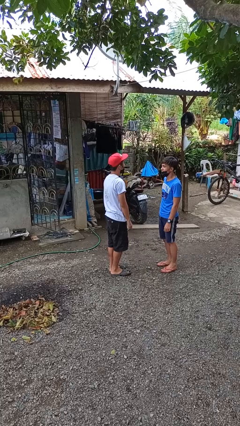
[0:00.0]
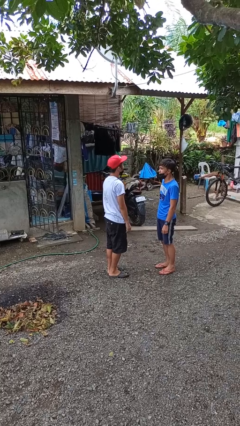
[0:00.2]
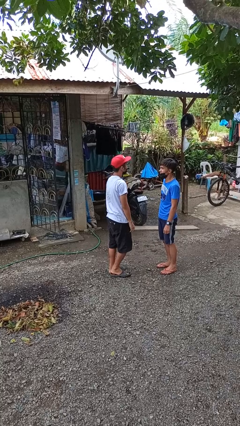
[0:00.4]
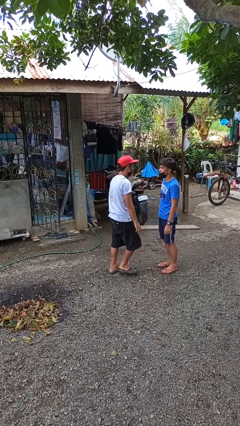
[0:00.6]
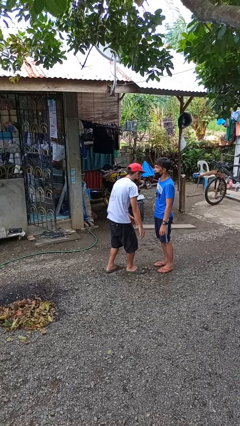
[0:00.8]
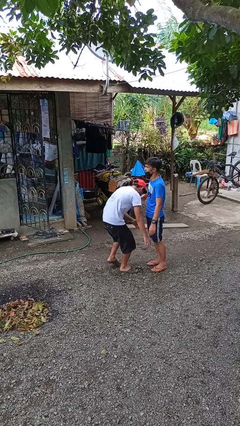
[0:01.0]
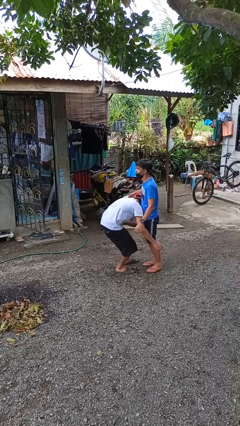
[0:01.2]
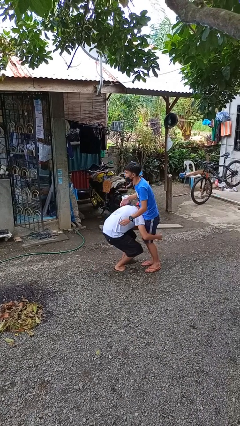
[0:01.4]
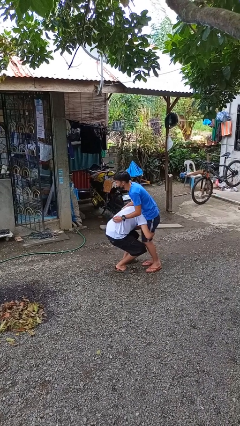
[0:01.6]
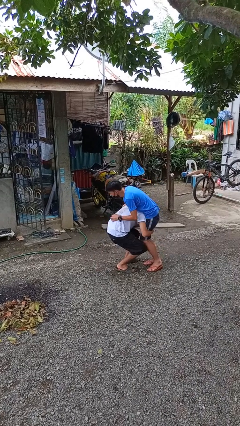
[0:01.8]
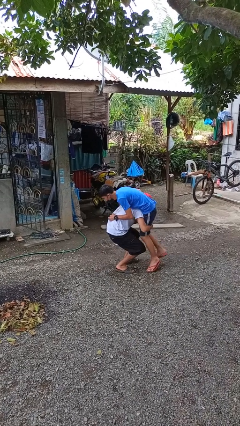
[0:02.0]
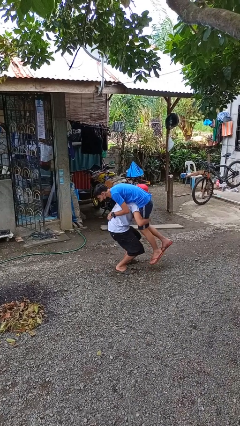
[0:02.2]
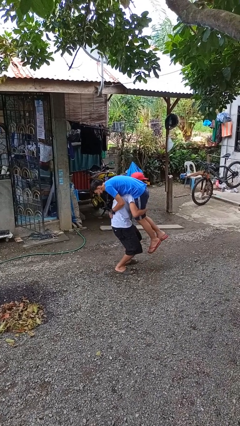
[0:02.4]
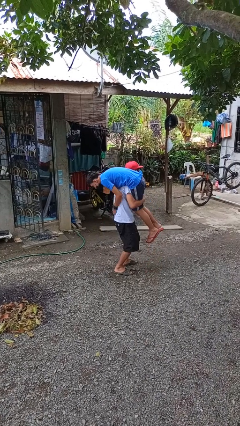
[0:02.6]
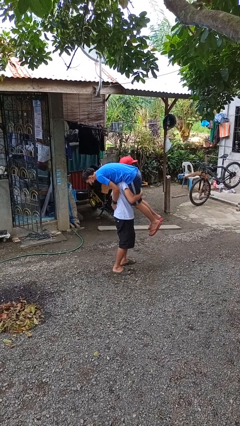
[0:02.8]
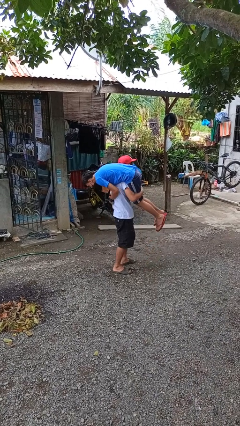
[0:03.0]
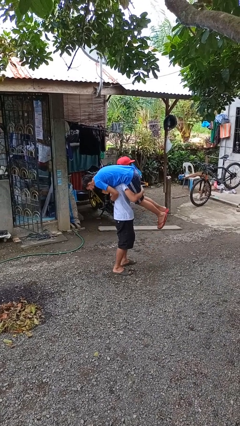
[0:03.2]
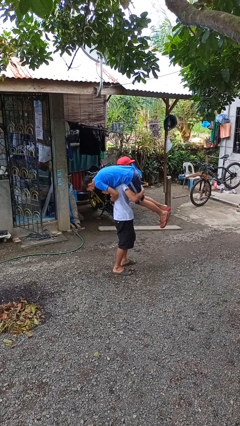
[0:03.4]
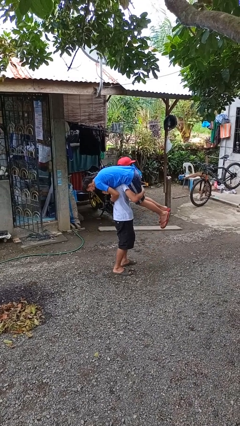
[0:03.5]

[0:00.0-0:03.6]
person carries person over shoulder

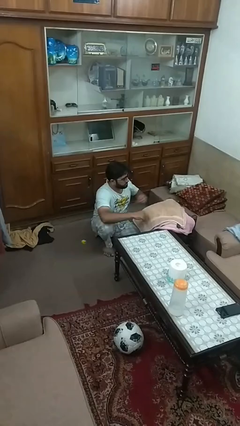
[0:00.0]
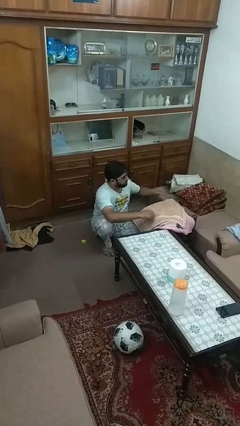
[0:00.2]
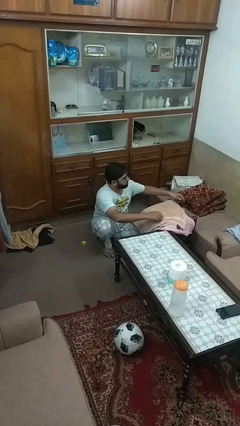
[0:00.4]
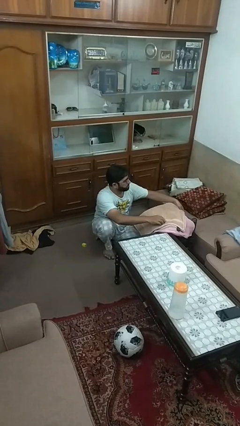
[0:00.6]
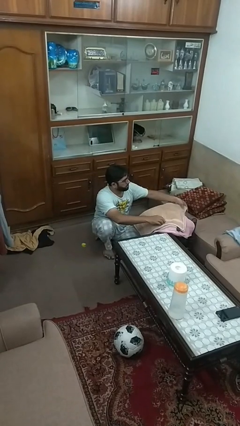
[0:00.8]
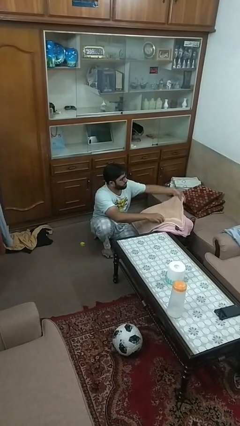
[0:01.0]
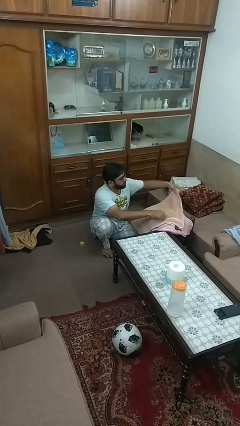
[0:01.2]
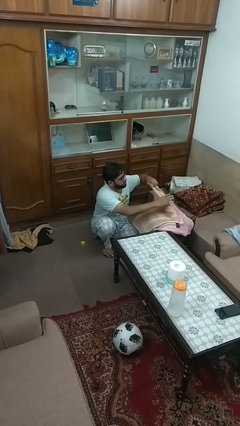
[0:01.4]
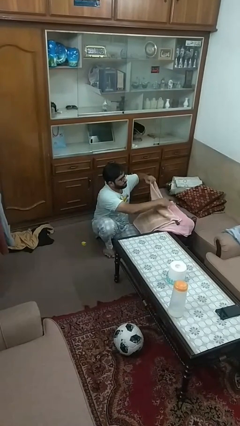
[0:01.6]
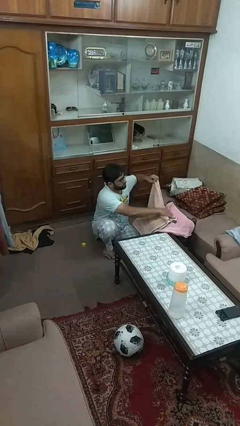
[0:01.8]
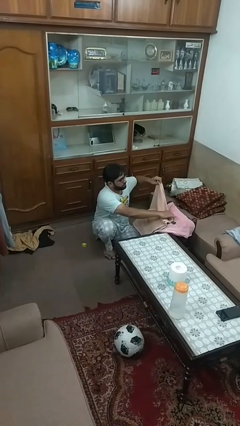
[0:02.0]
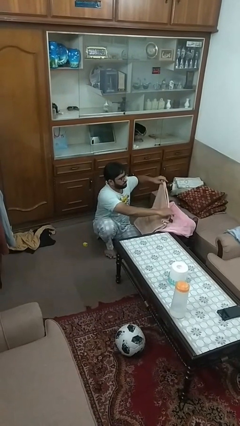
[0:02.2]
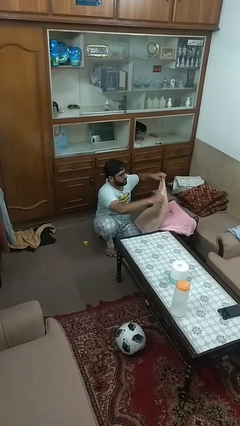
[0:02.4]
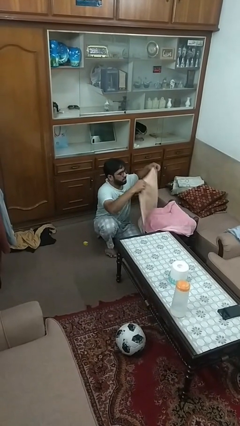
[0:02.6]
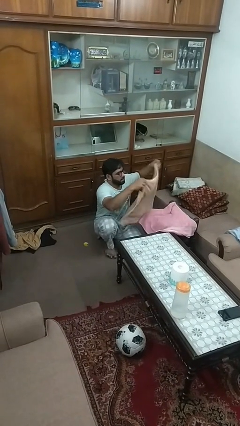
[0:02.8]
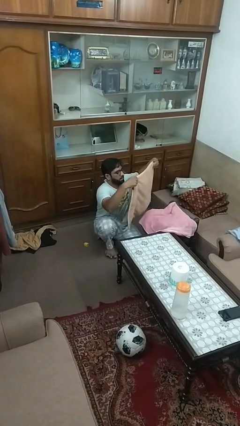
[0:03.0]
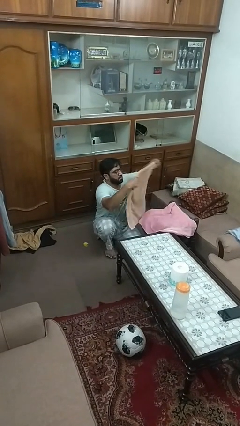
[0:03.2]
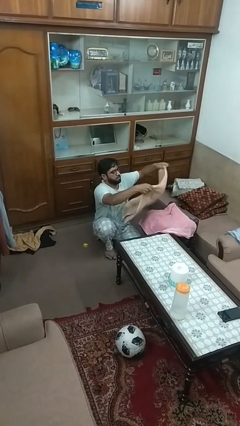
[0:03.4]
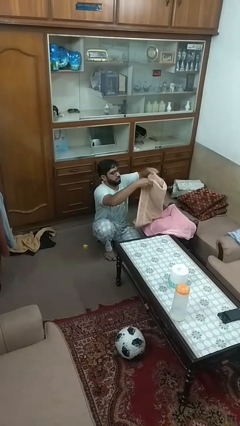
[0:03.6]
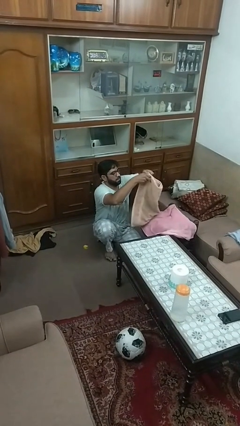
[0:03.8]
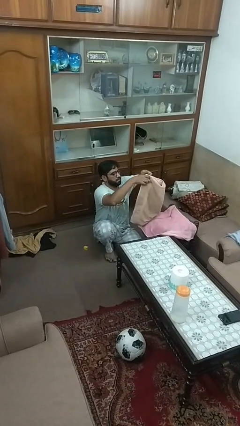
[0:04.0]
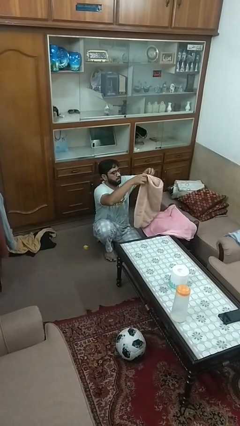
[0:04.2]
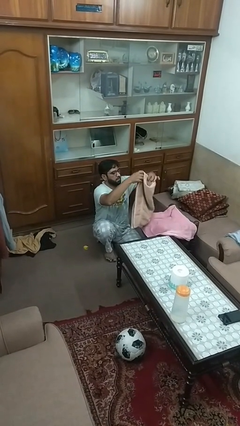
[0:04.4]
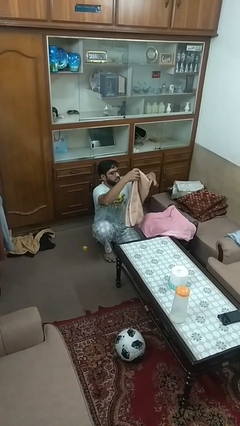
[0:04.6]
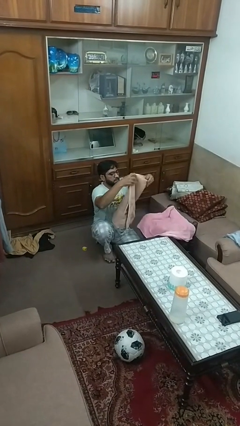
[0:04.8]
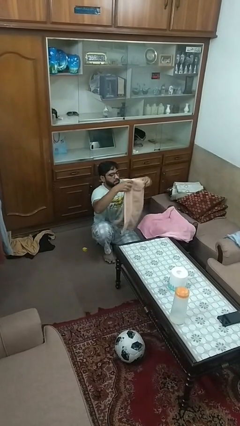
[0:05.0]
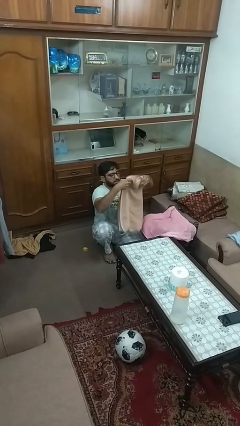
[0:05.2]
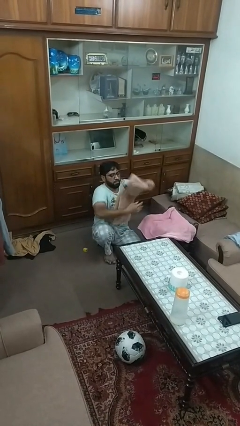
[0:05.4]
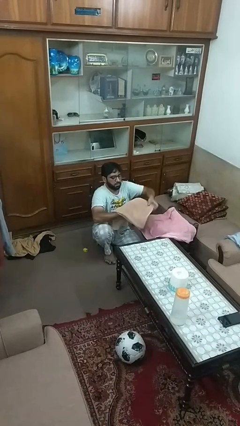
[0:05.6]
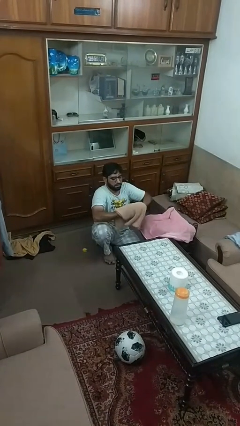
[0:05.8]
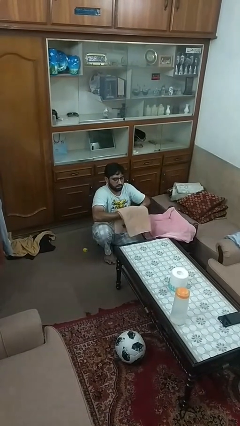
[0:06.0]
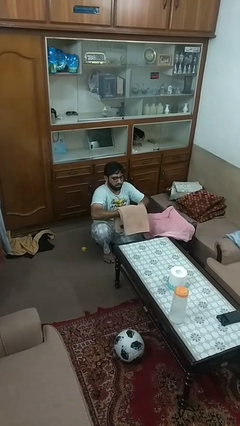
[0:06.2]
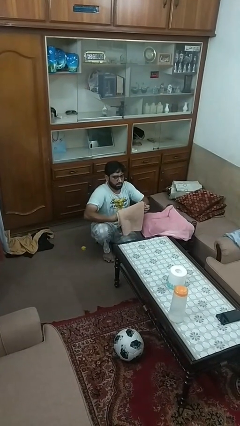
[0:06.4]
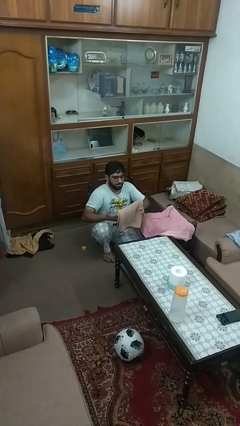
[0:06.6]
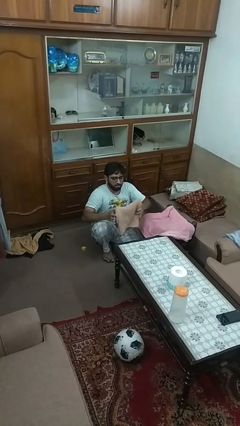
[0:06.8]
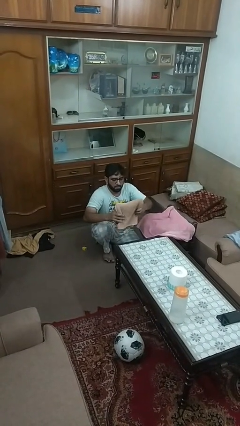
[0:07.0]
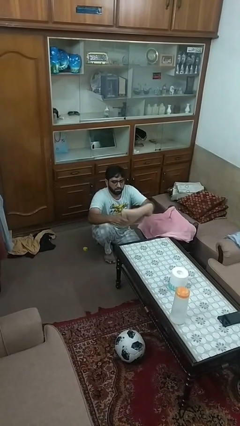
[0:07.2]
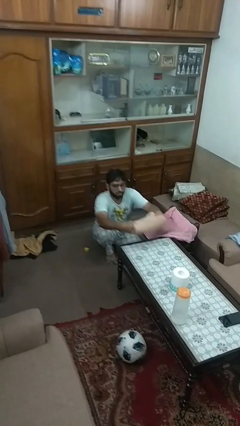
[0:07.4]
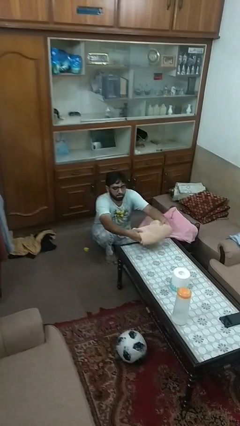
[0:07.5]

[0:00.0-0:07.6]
person folds towel

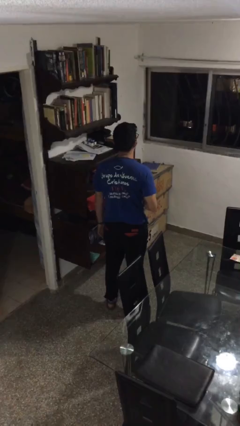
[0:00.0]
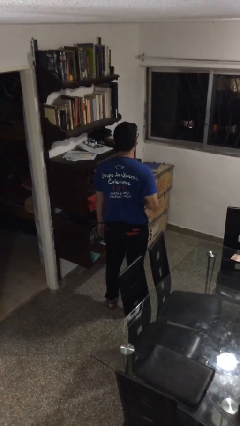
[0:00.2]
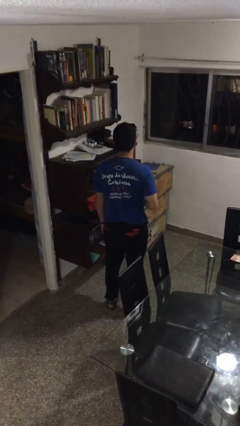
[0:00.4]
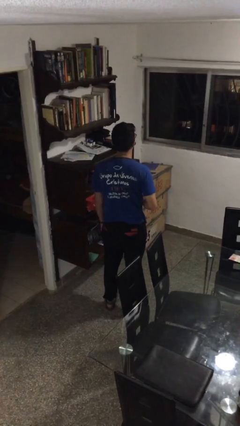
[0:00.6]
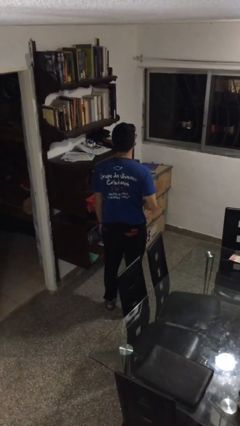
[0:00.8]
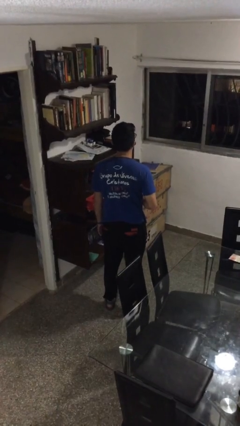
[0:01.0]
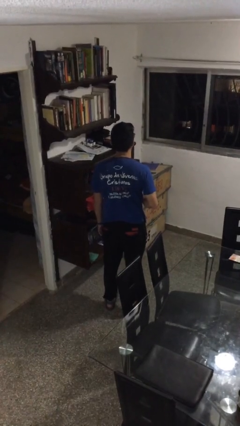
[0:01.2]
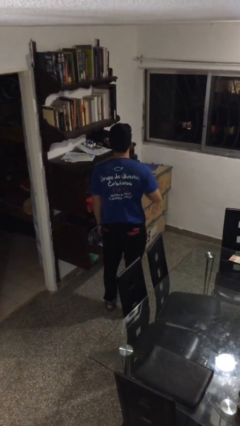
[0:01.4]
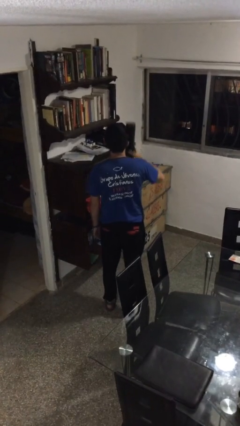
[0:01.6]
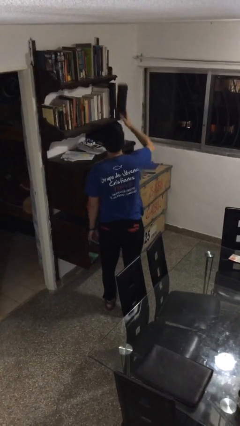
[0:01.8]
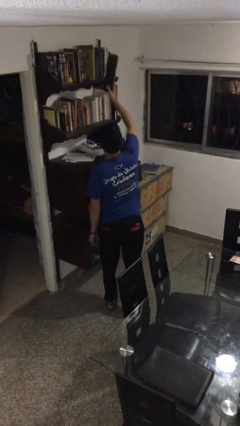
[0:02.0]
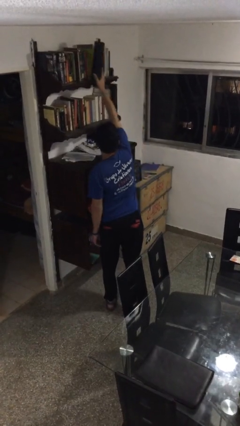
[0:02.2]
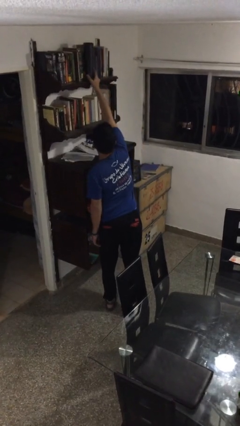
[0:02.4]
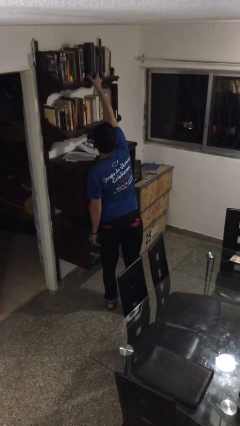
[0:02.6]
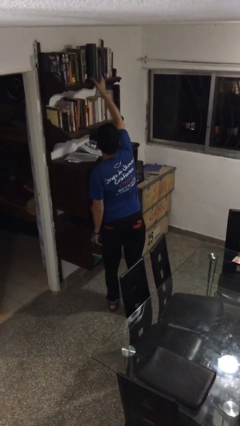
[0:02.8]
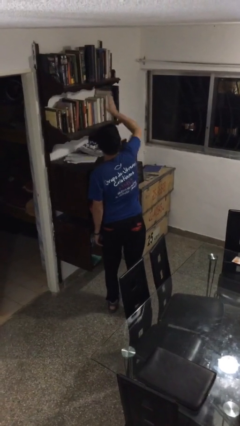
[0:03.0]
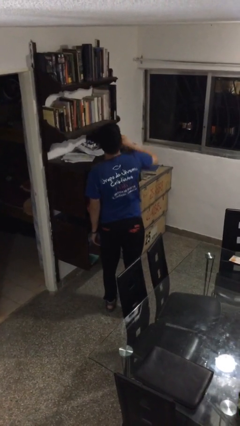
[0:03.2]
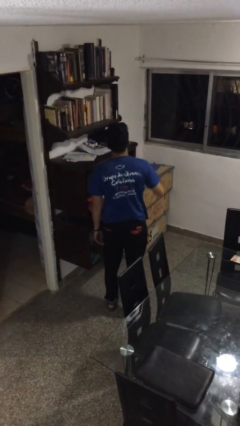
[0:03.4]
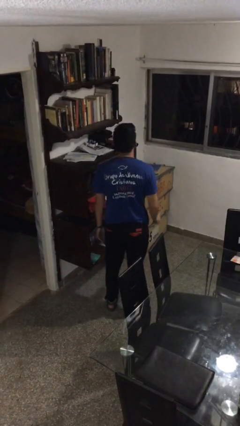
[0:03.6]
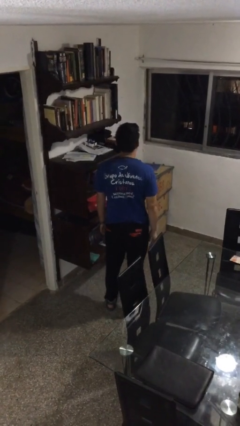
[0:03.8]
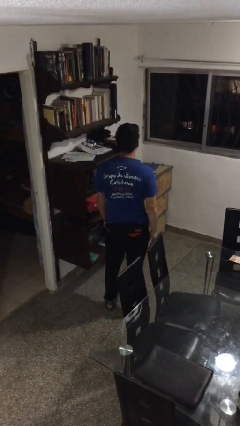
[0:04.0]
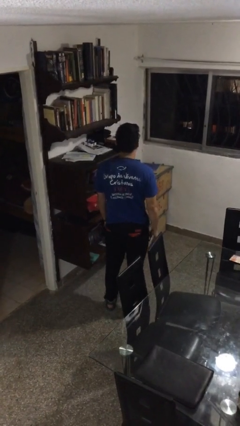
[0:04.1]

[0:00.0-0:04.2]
person puts down object on shelf

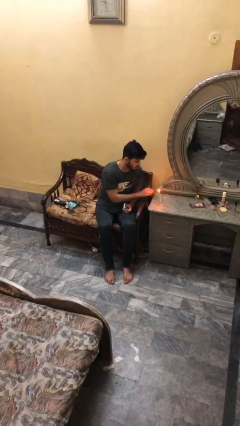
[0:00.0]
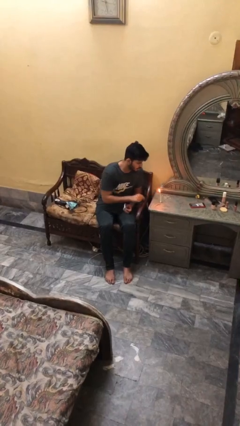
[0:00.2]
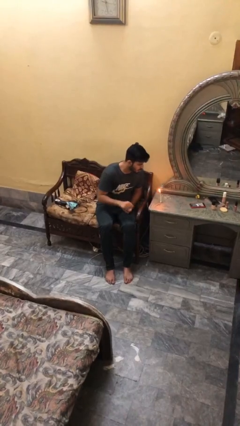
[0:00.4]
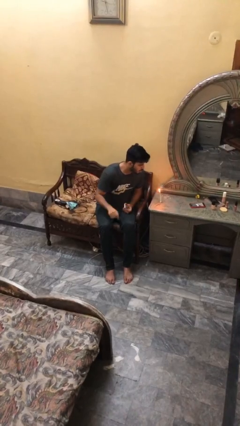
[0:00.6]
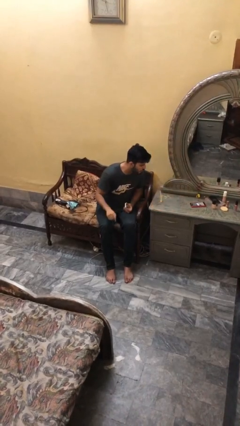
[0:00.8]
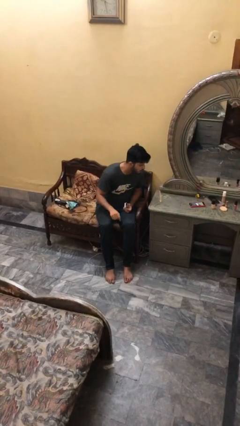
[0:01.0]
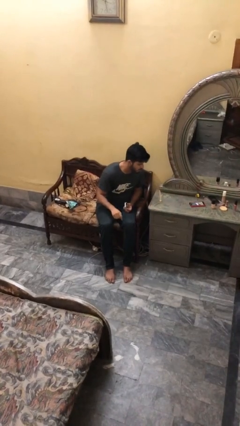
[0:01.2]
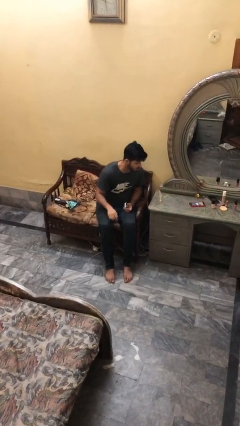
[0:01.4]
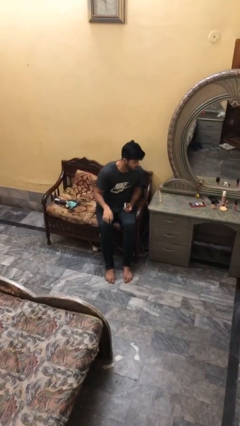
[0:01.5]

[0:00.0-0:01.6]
person extinguishes candle

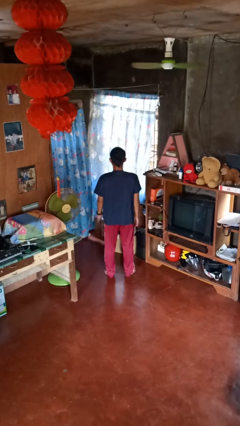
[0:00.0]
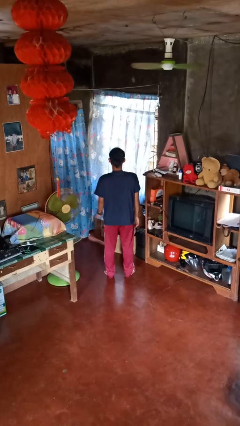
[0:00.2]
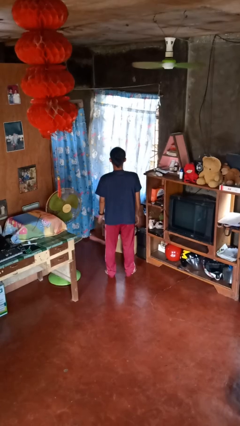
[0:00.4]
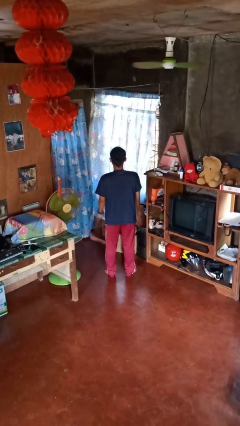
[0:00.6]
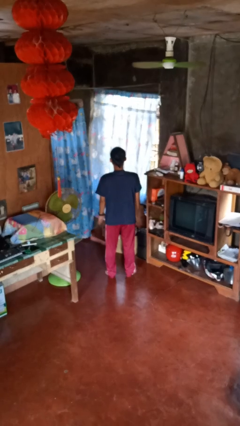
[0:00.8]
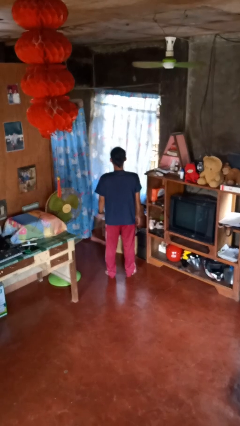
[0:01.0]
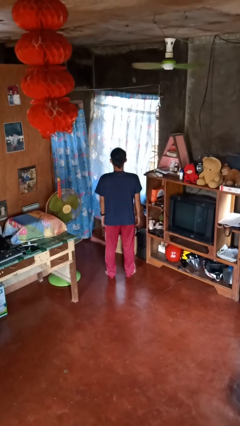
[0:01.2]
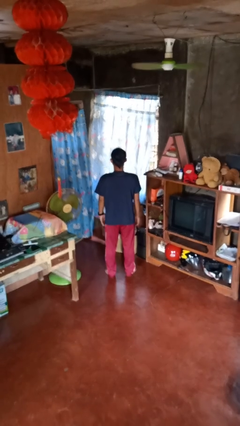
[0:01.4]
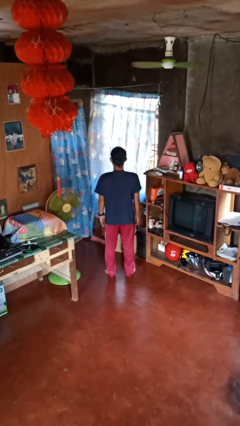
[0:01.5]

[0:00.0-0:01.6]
person slaps hands on thighs
